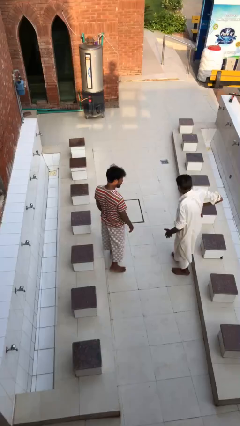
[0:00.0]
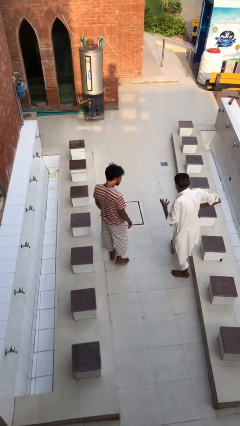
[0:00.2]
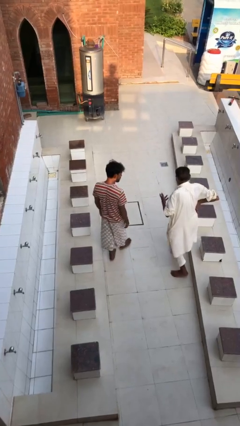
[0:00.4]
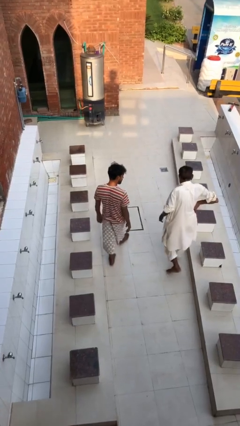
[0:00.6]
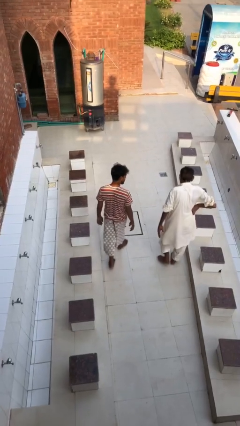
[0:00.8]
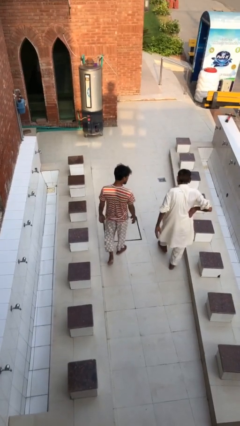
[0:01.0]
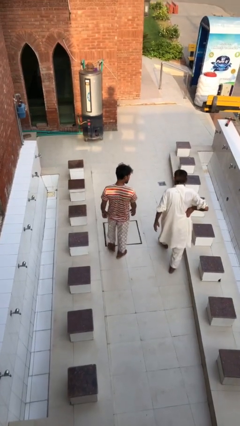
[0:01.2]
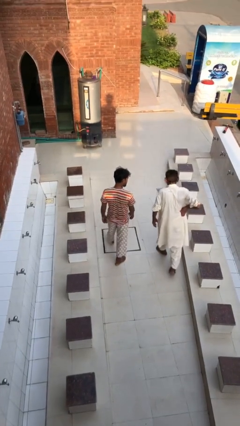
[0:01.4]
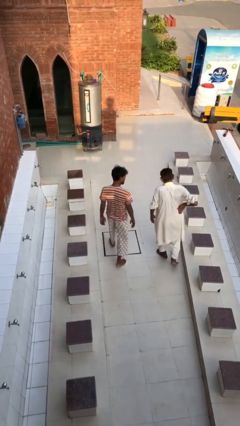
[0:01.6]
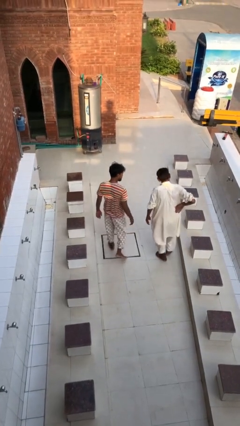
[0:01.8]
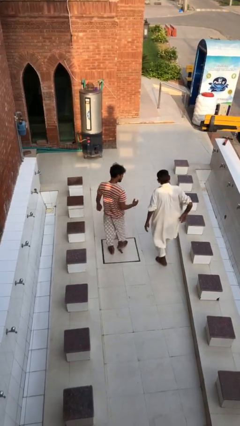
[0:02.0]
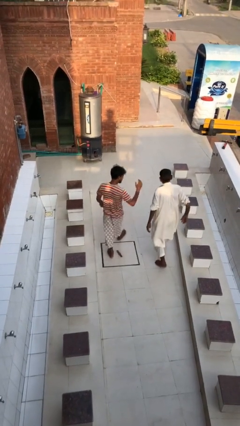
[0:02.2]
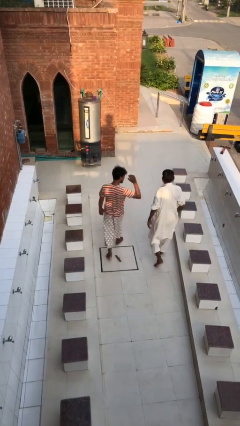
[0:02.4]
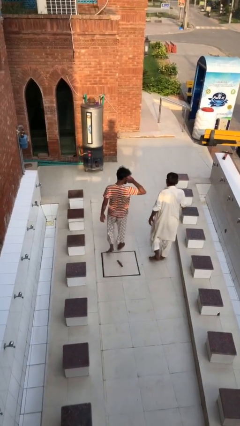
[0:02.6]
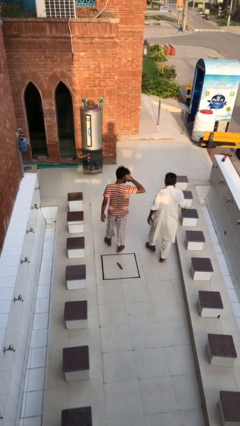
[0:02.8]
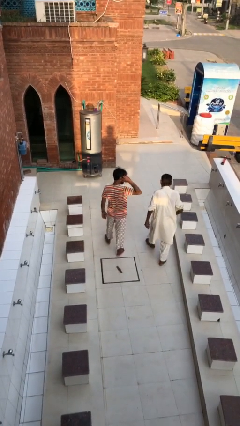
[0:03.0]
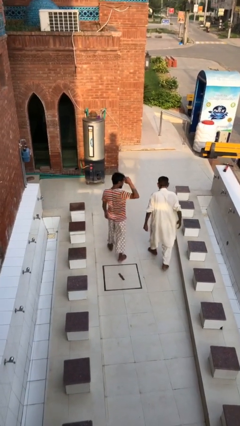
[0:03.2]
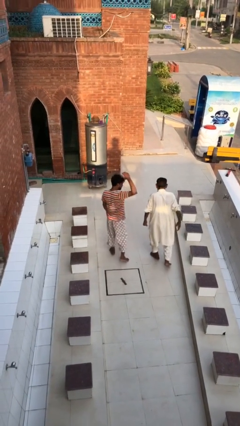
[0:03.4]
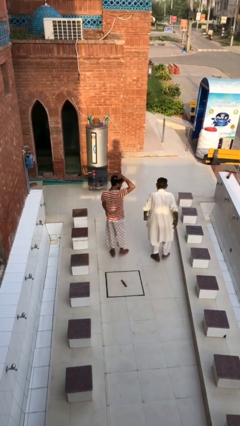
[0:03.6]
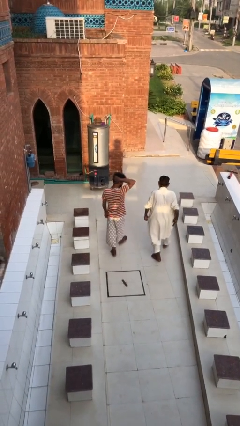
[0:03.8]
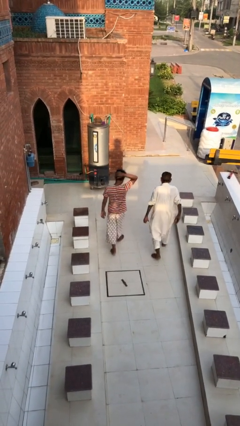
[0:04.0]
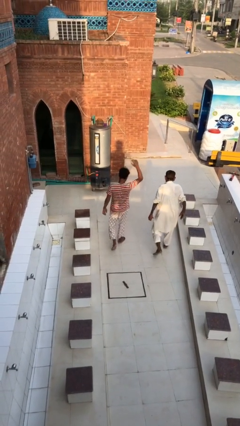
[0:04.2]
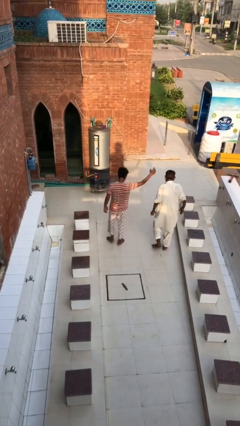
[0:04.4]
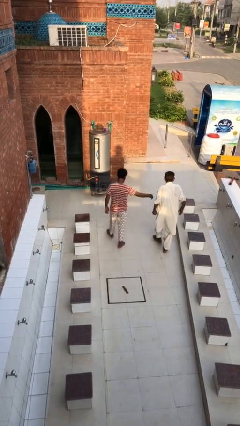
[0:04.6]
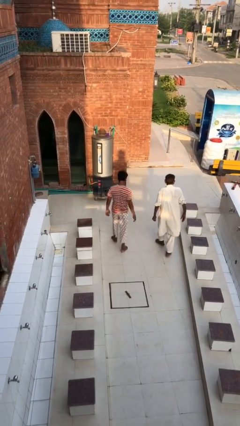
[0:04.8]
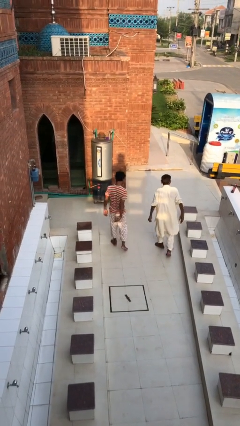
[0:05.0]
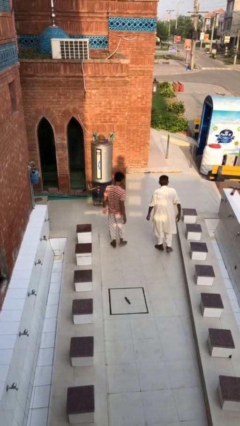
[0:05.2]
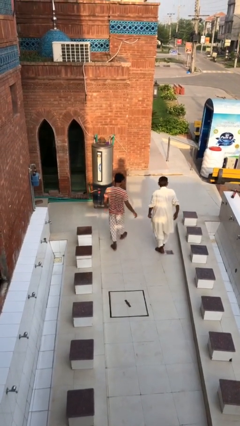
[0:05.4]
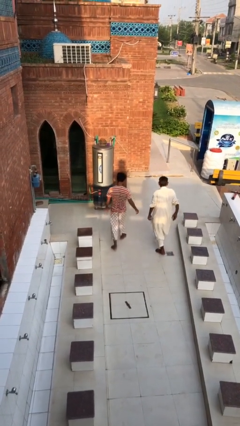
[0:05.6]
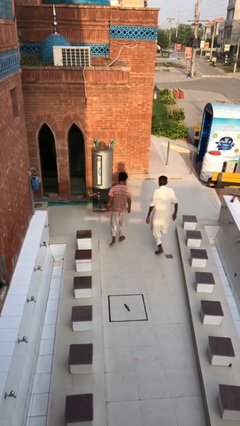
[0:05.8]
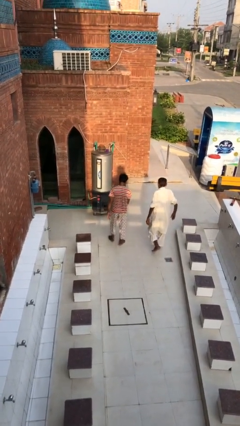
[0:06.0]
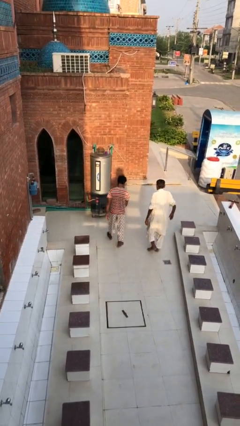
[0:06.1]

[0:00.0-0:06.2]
person talks to person

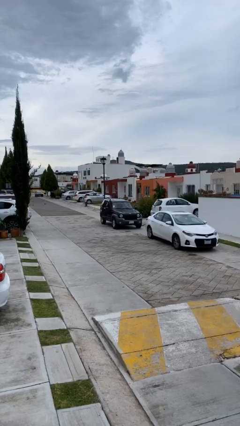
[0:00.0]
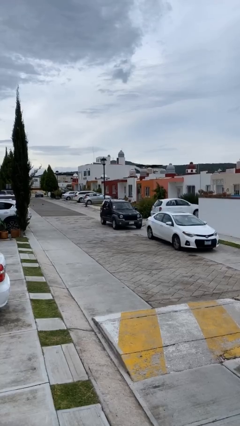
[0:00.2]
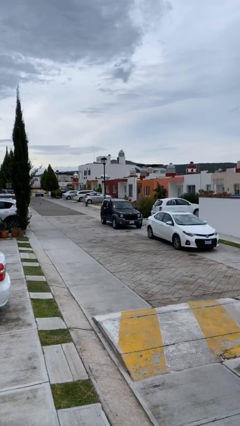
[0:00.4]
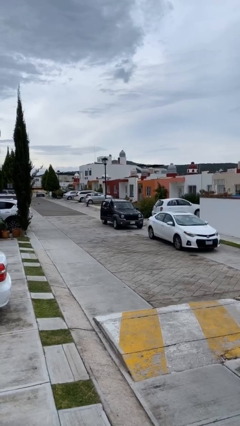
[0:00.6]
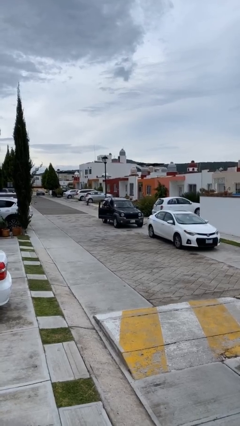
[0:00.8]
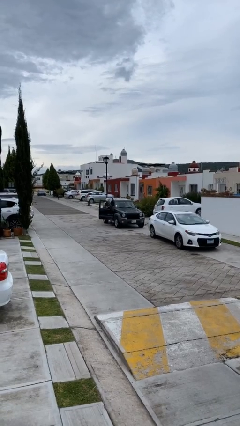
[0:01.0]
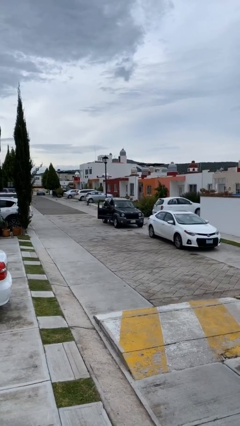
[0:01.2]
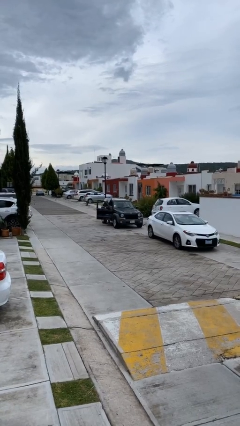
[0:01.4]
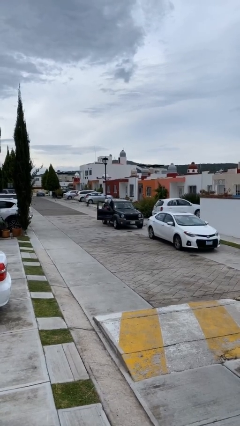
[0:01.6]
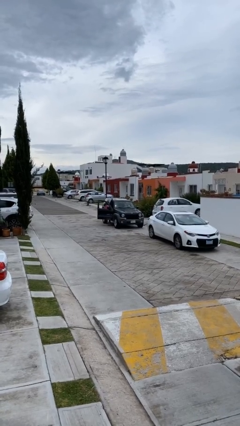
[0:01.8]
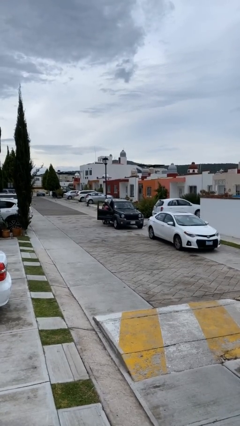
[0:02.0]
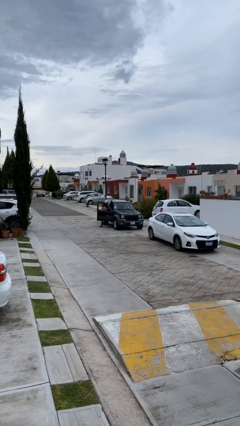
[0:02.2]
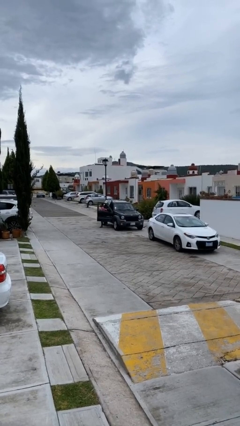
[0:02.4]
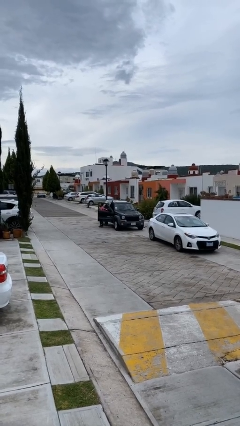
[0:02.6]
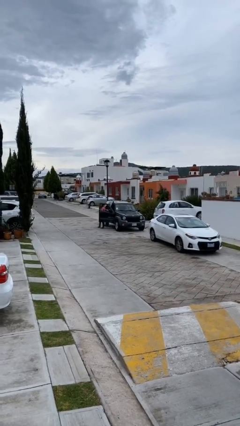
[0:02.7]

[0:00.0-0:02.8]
car drops off person

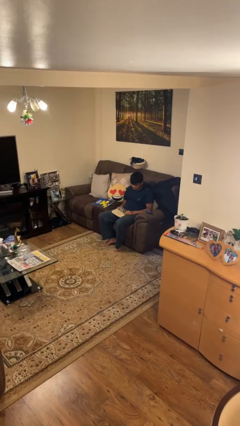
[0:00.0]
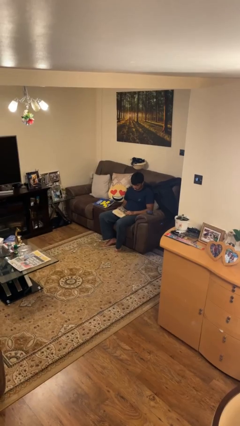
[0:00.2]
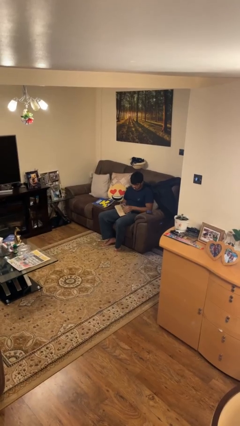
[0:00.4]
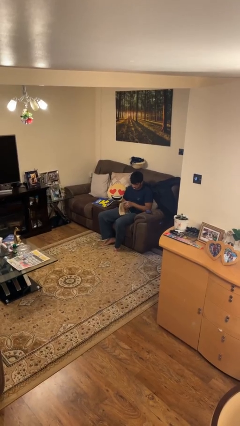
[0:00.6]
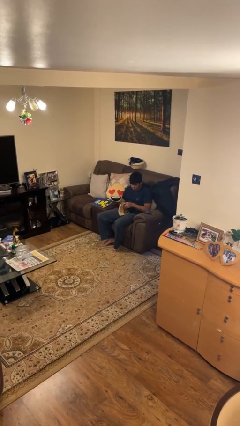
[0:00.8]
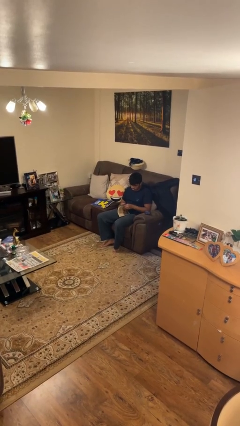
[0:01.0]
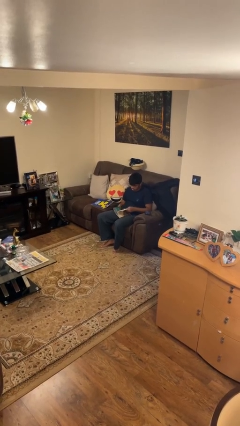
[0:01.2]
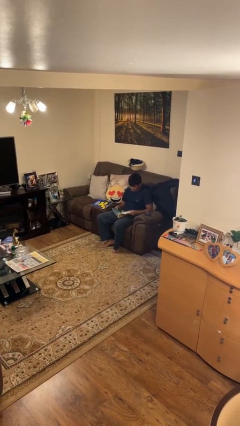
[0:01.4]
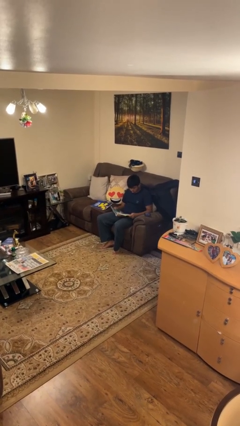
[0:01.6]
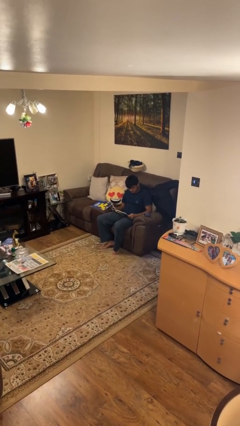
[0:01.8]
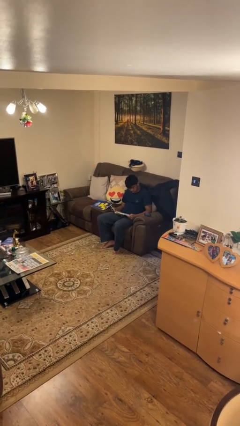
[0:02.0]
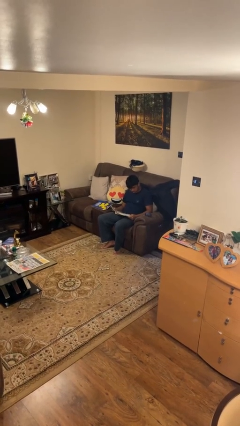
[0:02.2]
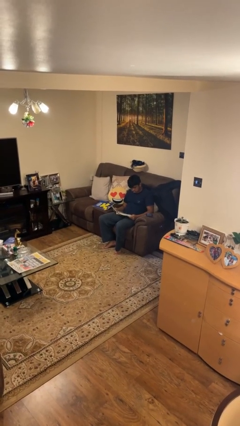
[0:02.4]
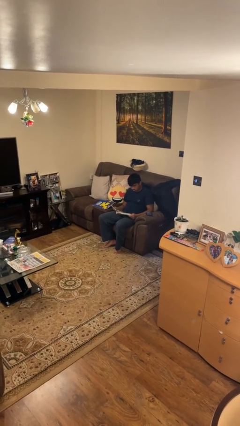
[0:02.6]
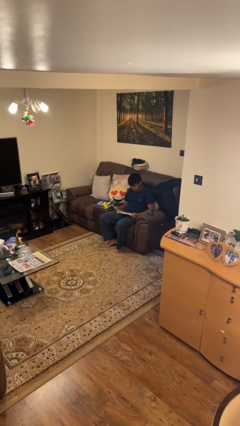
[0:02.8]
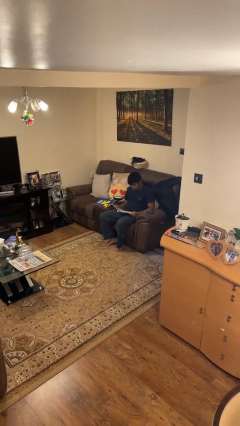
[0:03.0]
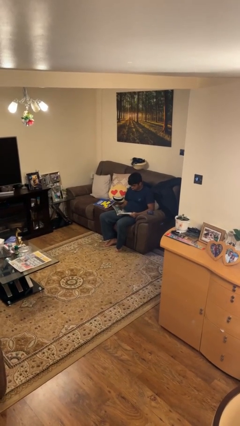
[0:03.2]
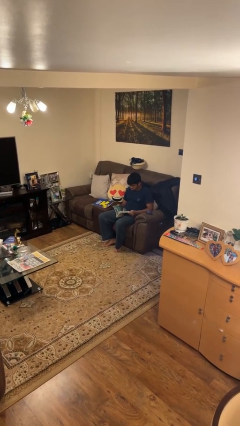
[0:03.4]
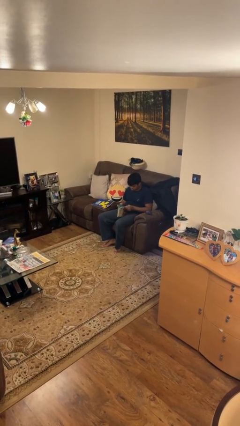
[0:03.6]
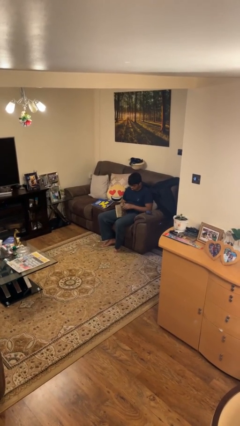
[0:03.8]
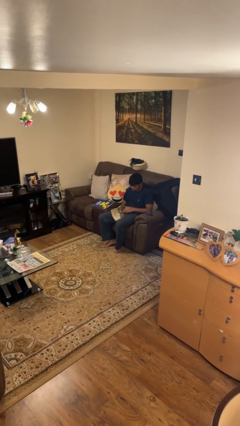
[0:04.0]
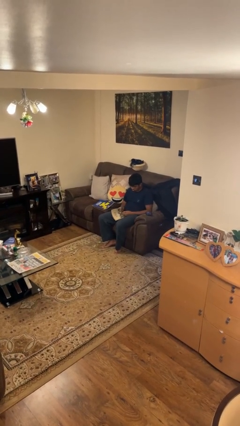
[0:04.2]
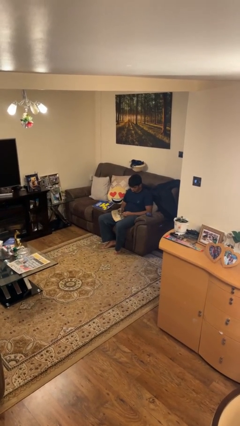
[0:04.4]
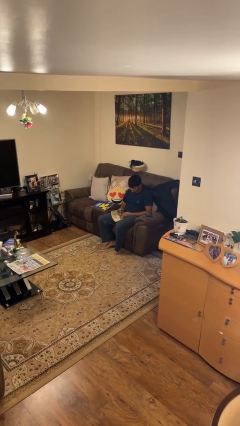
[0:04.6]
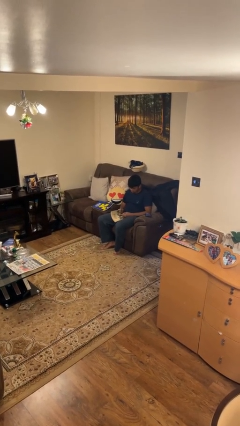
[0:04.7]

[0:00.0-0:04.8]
person reads book

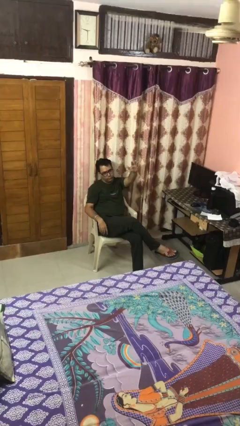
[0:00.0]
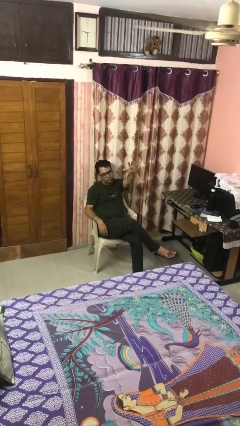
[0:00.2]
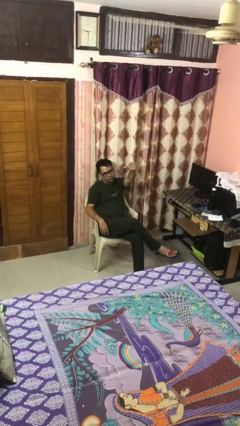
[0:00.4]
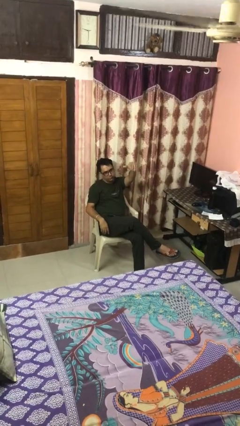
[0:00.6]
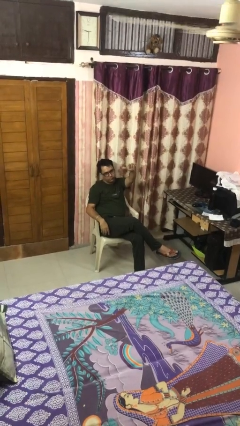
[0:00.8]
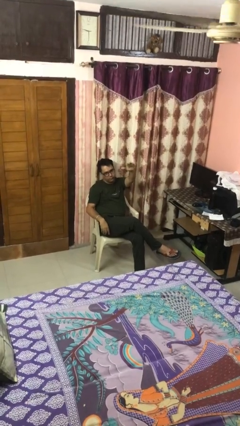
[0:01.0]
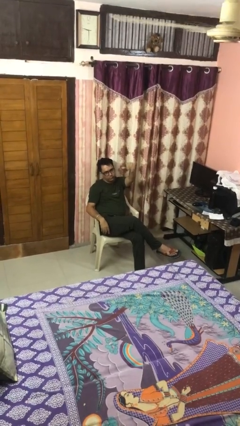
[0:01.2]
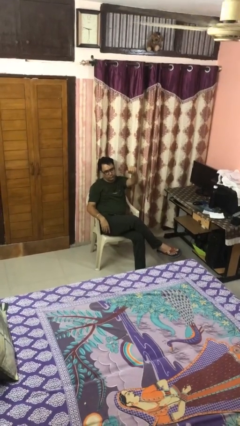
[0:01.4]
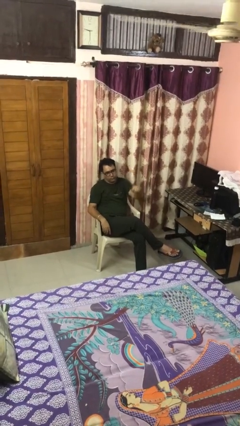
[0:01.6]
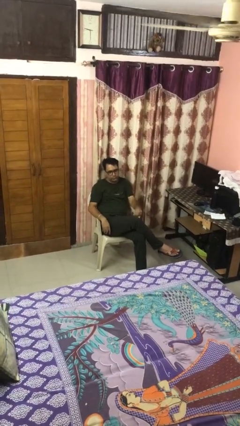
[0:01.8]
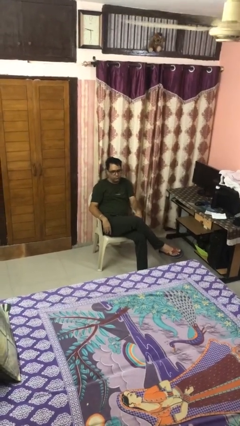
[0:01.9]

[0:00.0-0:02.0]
person gestures come here

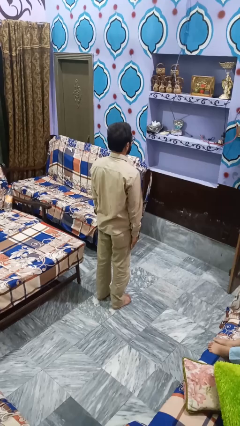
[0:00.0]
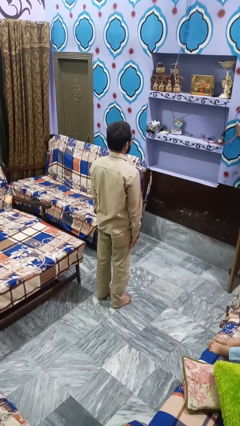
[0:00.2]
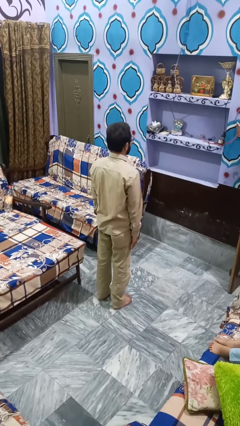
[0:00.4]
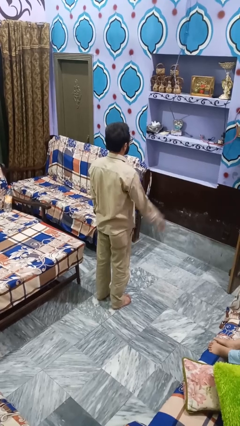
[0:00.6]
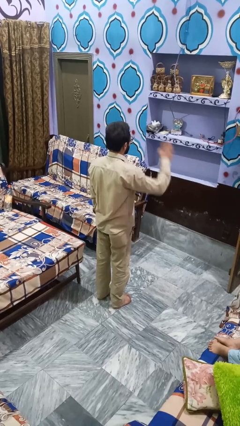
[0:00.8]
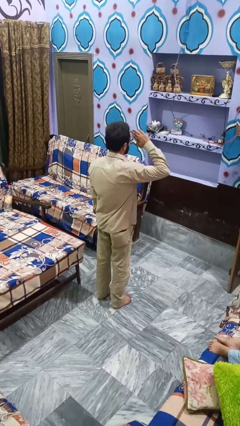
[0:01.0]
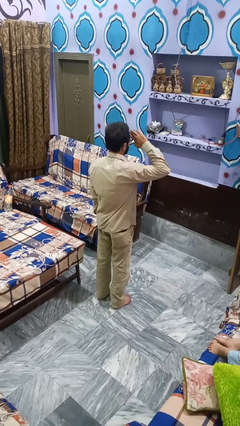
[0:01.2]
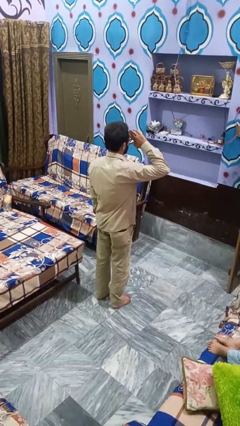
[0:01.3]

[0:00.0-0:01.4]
person salutes

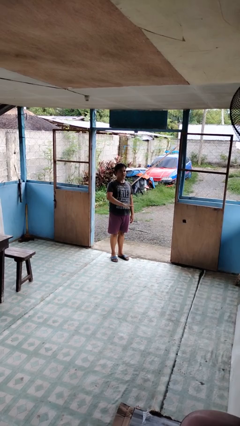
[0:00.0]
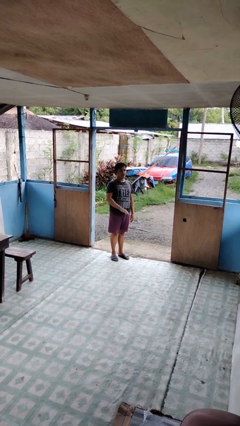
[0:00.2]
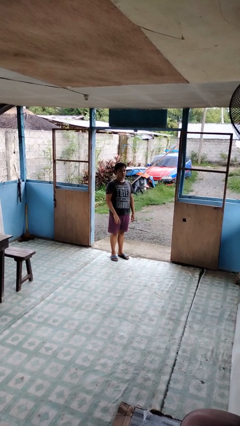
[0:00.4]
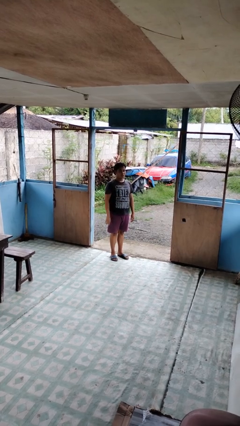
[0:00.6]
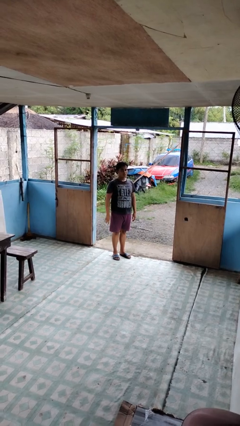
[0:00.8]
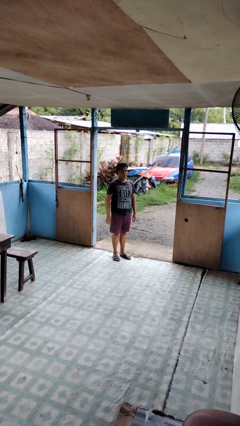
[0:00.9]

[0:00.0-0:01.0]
person gestures swipe down
